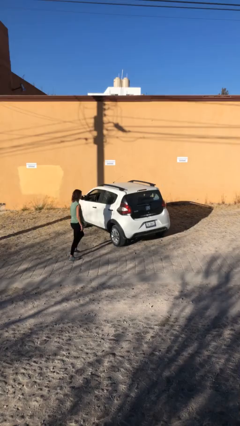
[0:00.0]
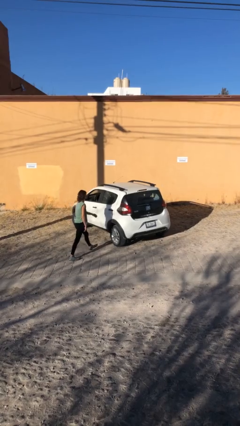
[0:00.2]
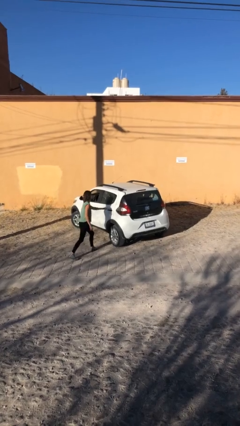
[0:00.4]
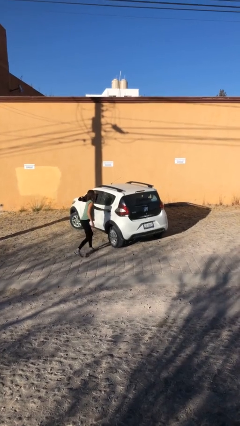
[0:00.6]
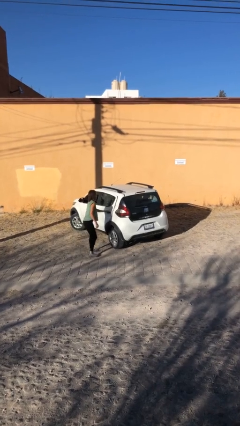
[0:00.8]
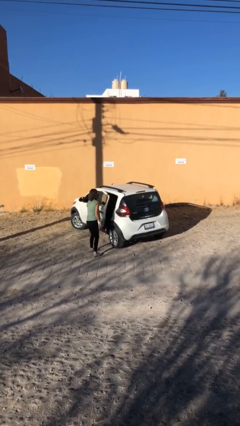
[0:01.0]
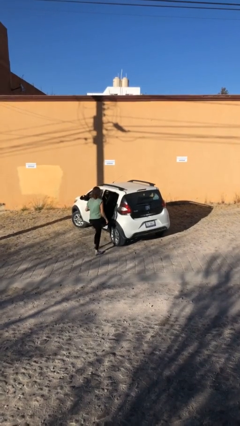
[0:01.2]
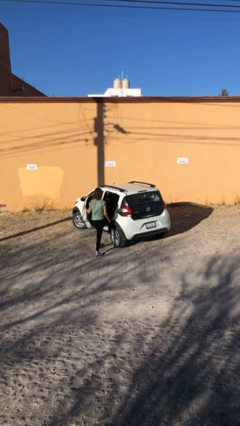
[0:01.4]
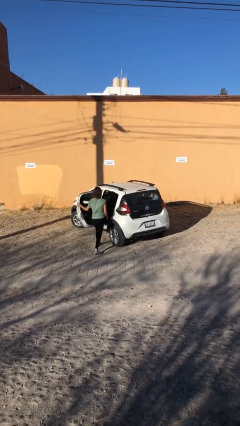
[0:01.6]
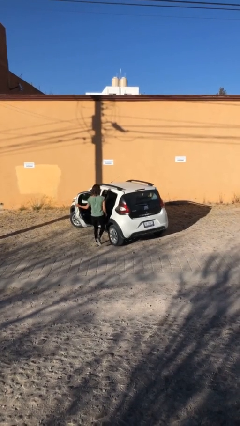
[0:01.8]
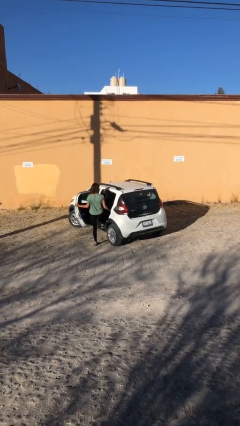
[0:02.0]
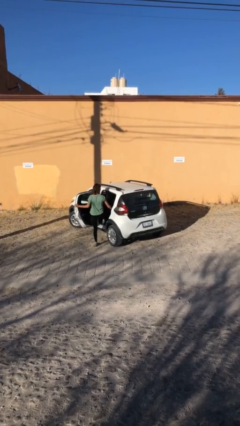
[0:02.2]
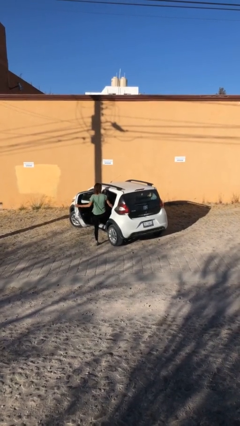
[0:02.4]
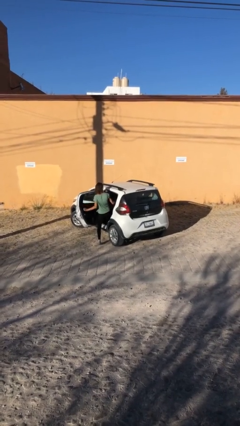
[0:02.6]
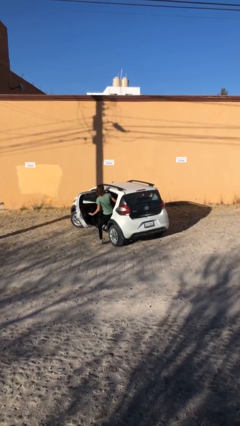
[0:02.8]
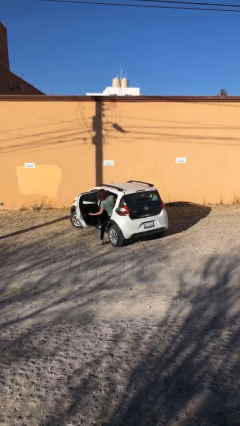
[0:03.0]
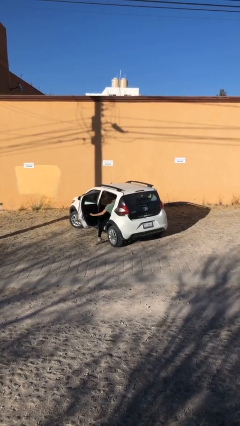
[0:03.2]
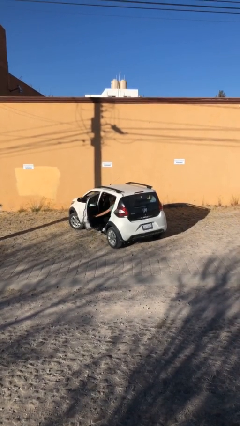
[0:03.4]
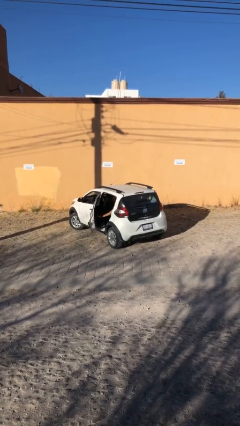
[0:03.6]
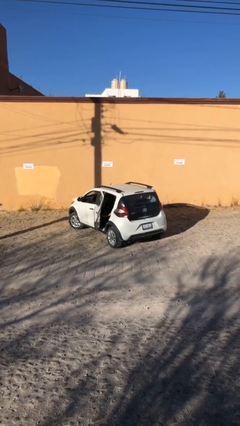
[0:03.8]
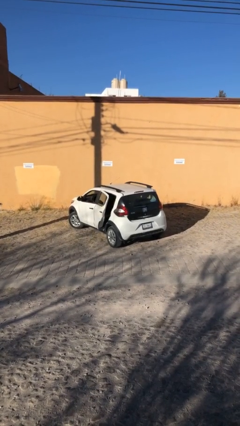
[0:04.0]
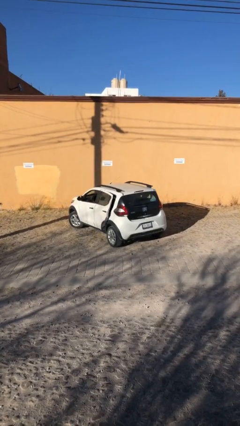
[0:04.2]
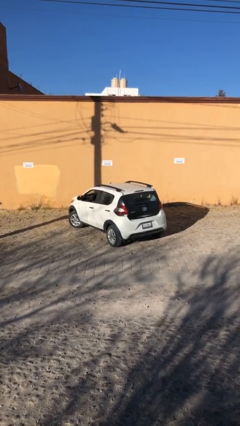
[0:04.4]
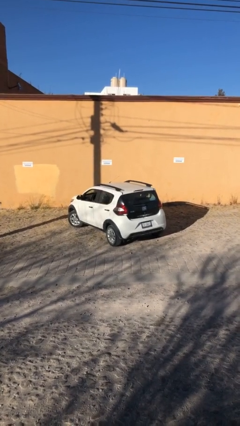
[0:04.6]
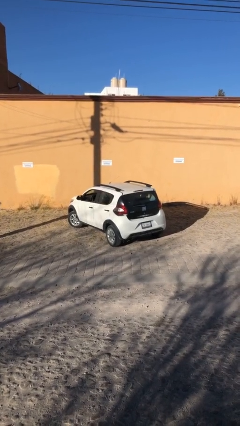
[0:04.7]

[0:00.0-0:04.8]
car picks up person

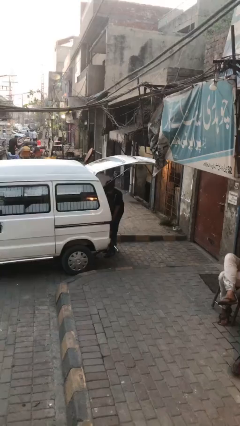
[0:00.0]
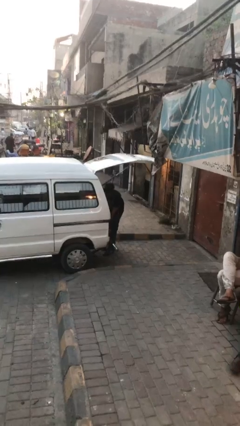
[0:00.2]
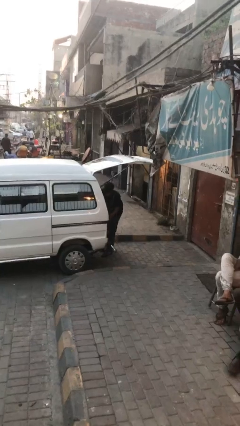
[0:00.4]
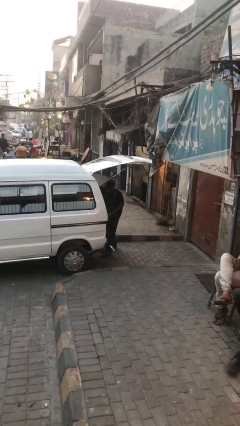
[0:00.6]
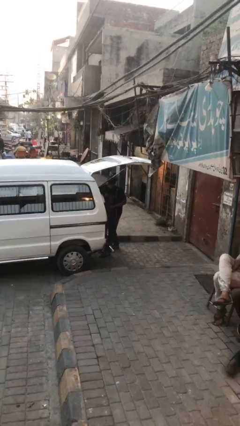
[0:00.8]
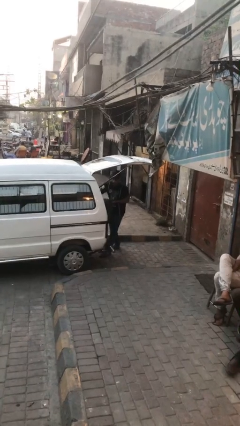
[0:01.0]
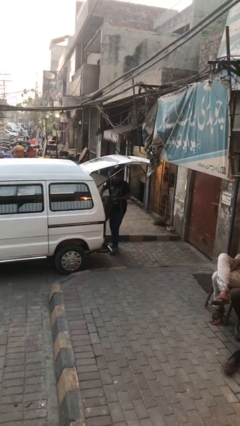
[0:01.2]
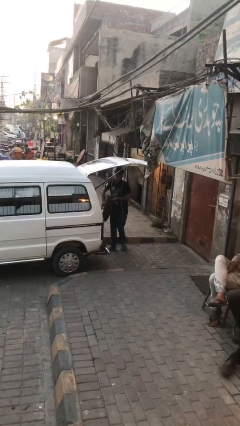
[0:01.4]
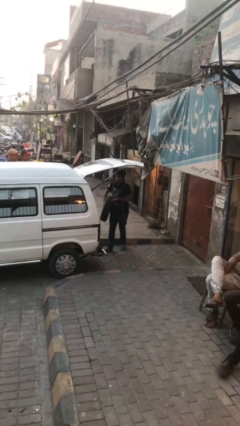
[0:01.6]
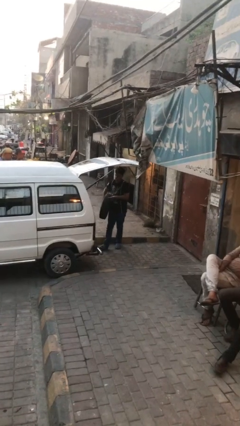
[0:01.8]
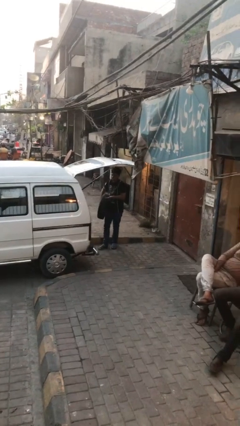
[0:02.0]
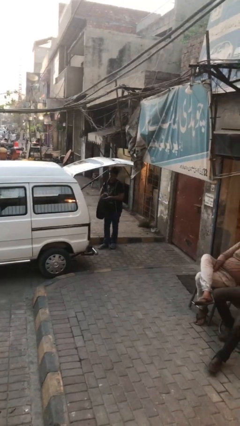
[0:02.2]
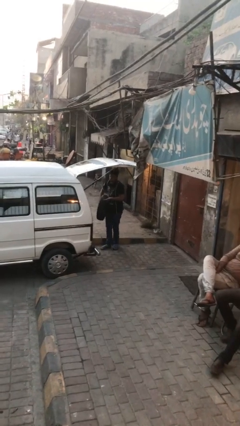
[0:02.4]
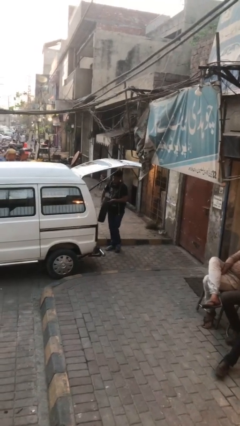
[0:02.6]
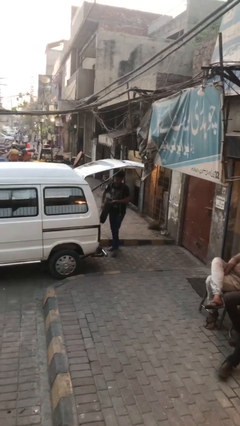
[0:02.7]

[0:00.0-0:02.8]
person unloads car

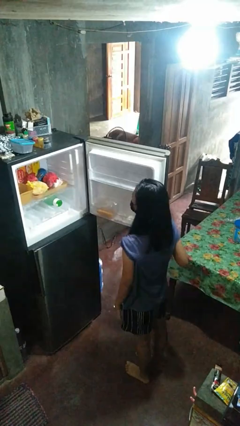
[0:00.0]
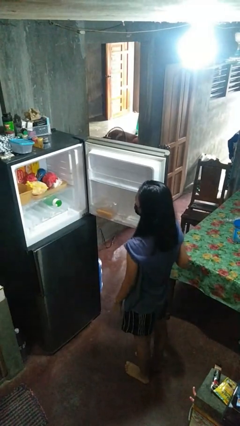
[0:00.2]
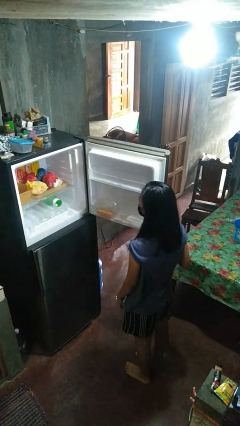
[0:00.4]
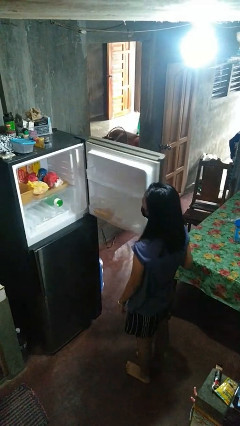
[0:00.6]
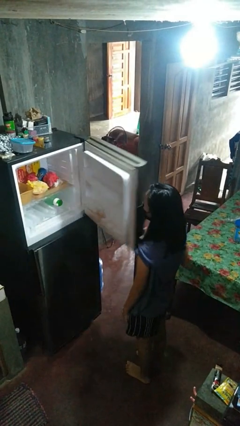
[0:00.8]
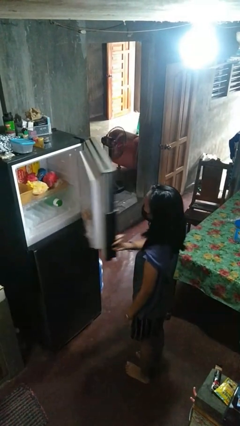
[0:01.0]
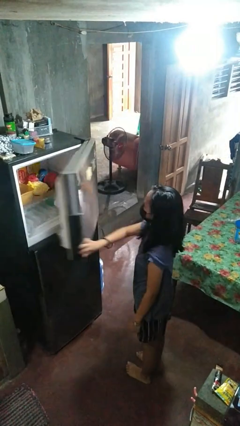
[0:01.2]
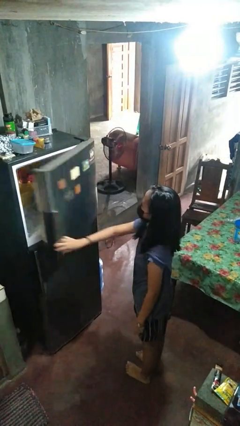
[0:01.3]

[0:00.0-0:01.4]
person closes refrigerator

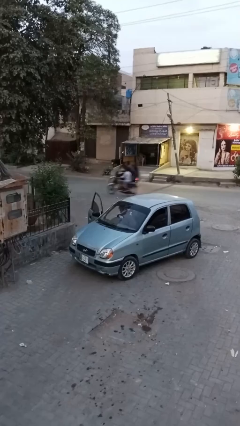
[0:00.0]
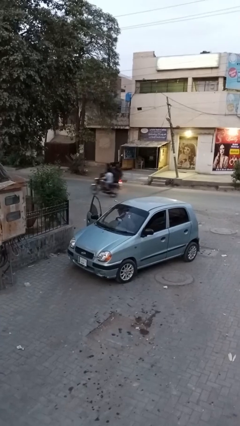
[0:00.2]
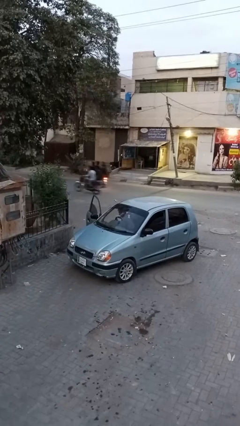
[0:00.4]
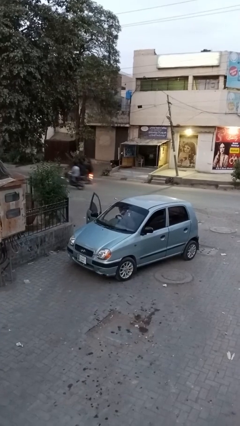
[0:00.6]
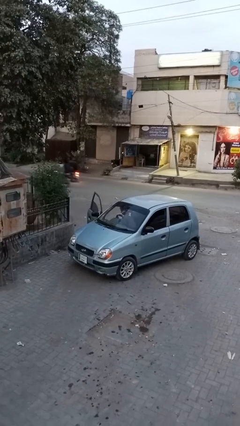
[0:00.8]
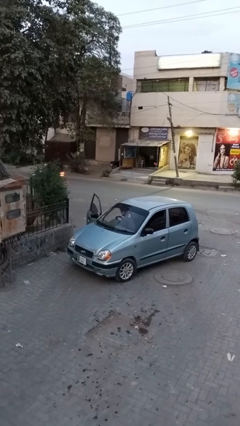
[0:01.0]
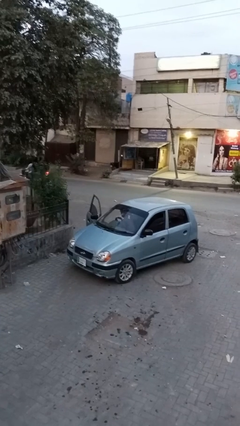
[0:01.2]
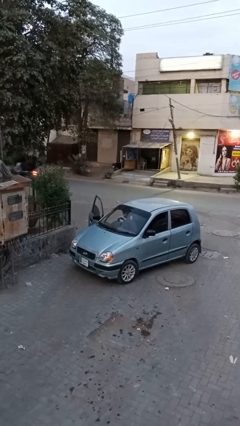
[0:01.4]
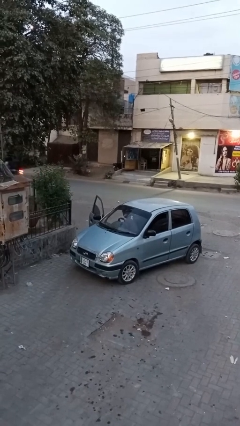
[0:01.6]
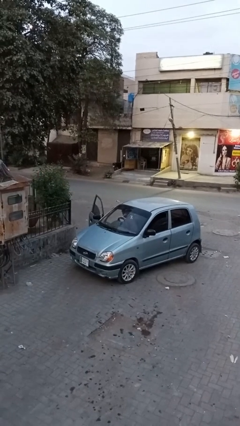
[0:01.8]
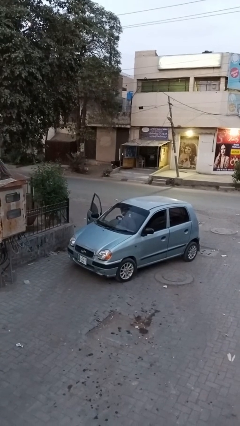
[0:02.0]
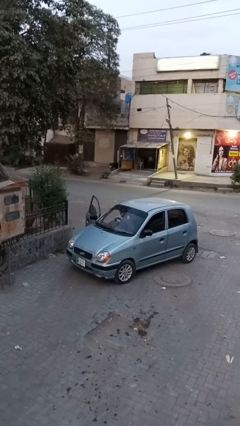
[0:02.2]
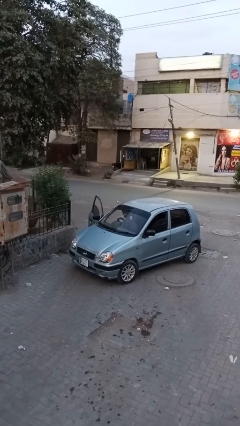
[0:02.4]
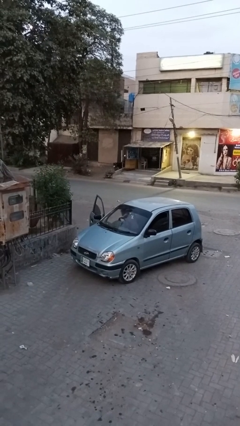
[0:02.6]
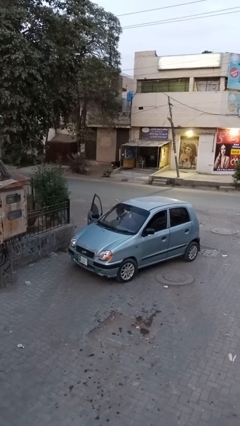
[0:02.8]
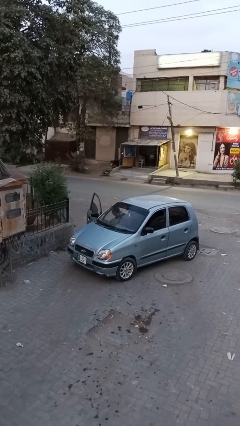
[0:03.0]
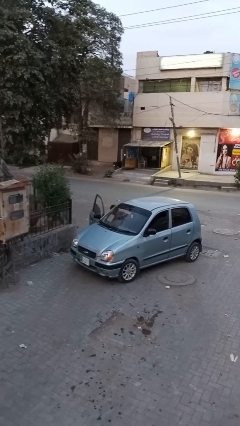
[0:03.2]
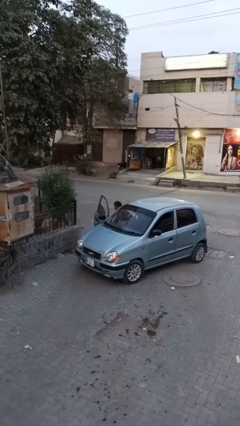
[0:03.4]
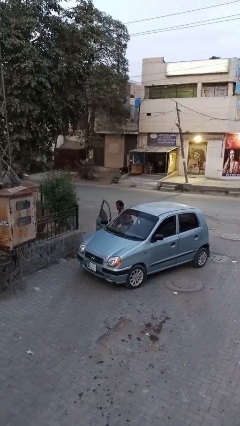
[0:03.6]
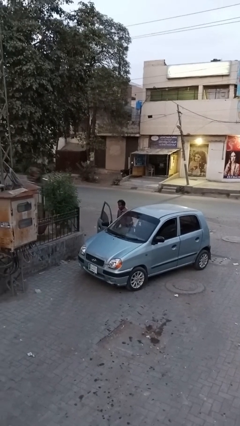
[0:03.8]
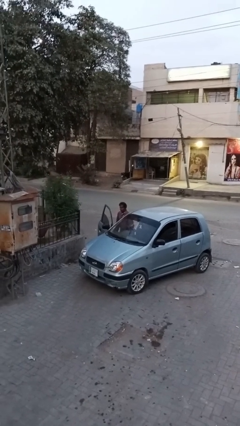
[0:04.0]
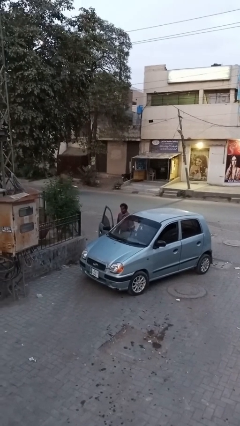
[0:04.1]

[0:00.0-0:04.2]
person exits car

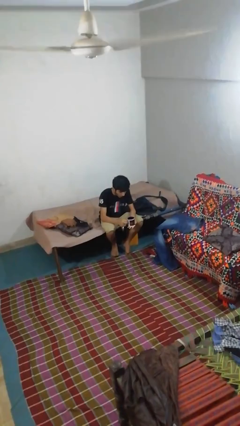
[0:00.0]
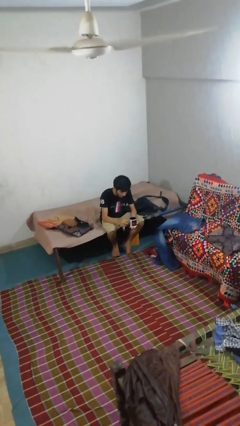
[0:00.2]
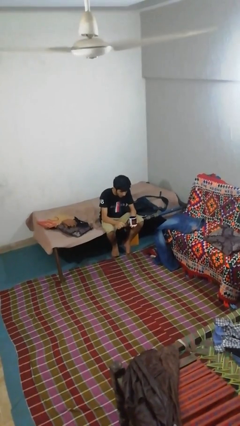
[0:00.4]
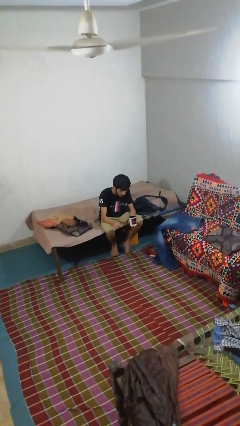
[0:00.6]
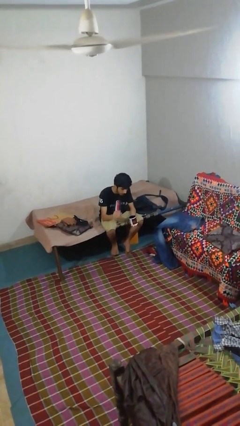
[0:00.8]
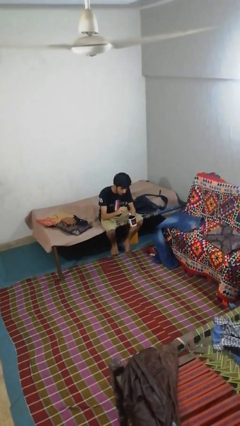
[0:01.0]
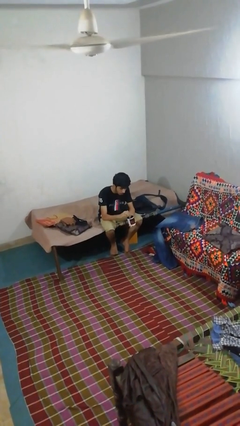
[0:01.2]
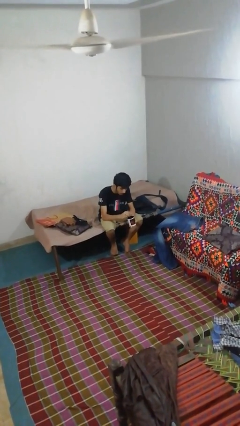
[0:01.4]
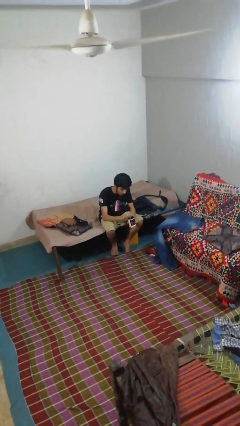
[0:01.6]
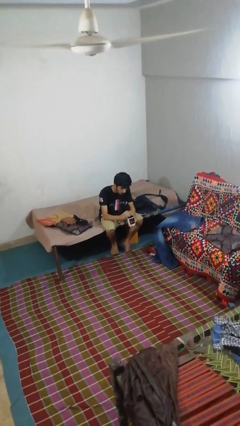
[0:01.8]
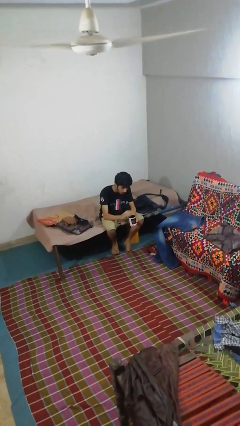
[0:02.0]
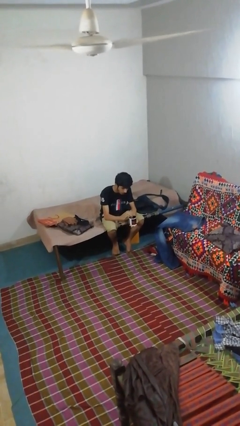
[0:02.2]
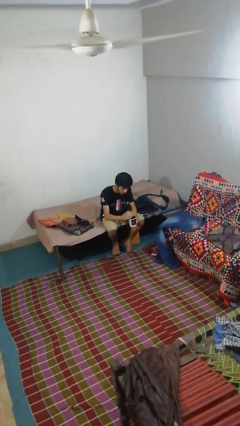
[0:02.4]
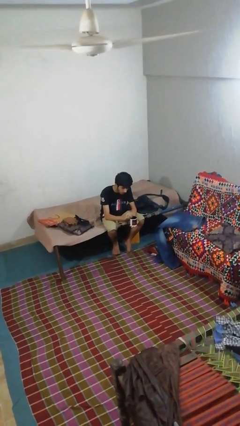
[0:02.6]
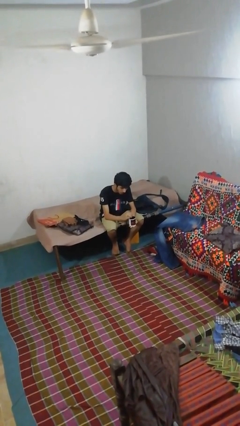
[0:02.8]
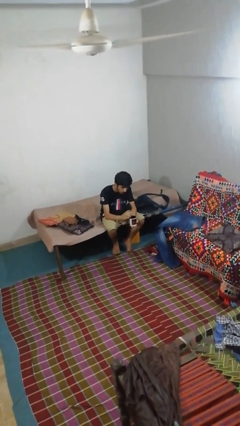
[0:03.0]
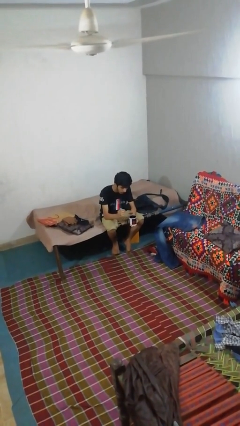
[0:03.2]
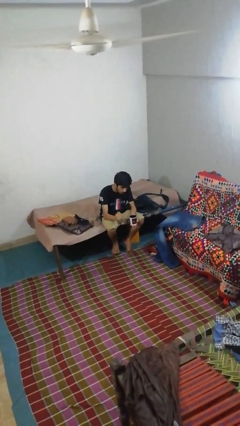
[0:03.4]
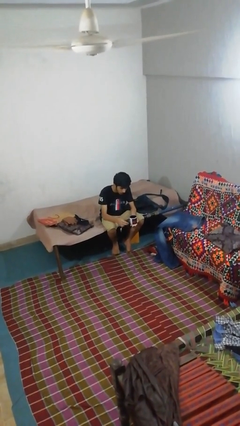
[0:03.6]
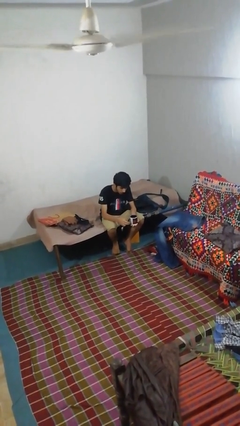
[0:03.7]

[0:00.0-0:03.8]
person stirs mug

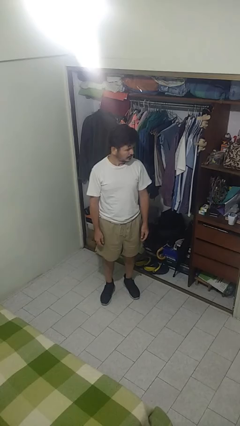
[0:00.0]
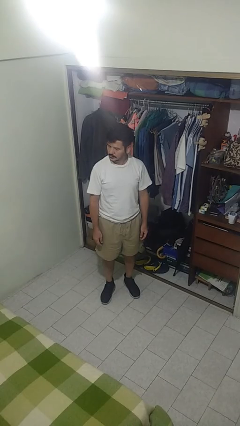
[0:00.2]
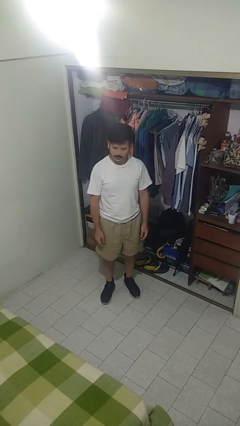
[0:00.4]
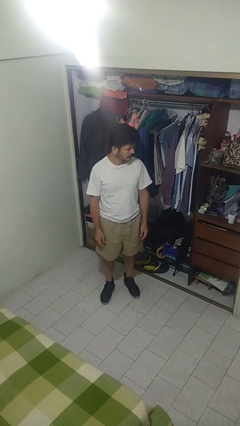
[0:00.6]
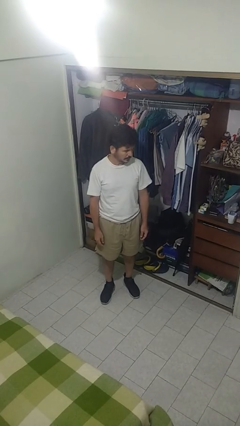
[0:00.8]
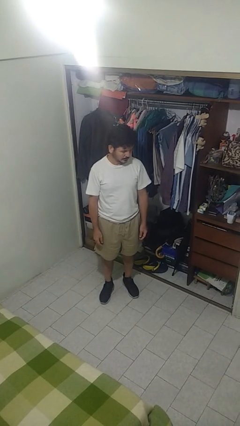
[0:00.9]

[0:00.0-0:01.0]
person shakes head
